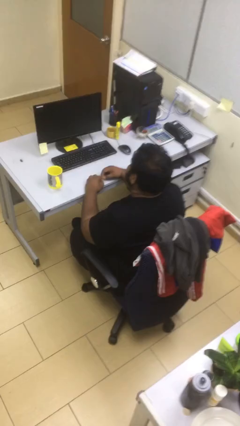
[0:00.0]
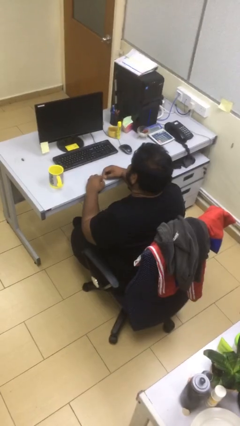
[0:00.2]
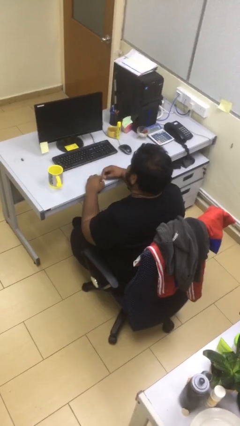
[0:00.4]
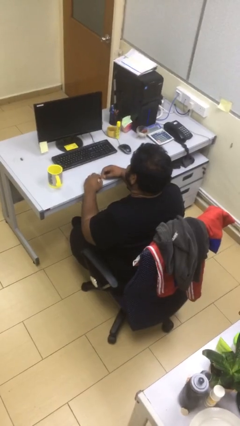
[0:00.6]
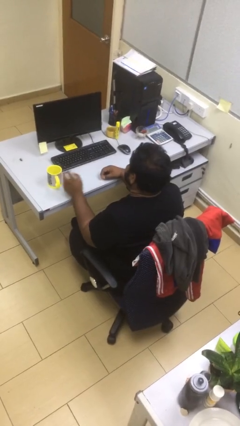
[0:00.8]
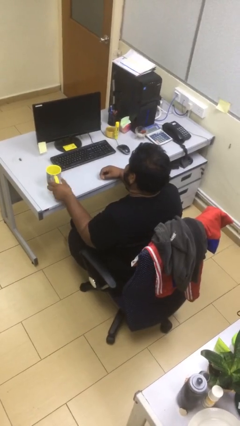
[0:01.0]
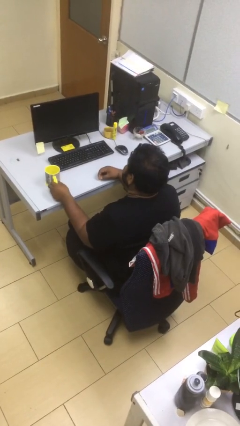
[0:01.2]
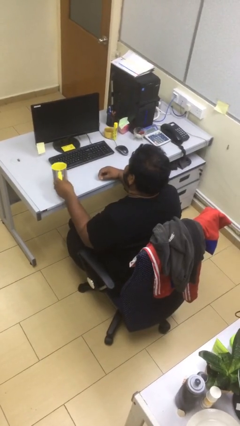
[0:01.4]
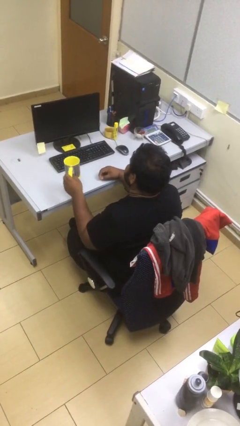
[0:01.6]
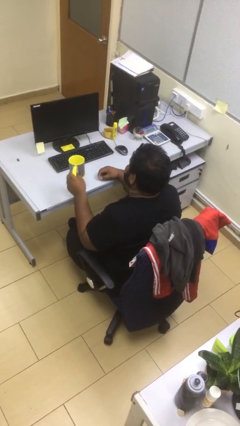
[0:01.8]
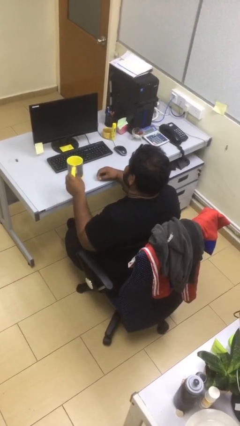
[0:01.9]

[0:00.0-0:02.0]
person picks up object from table

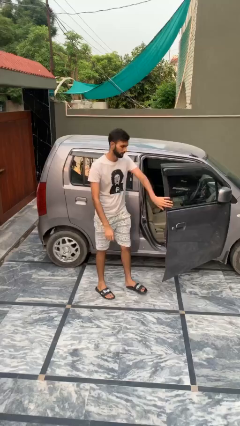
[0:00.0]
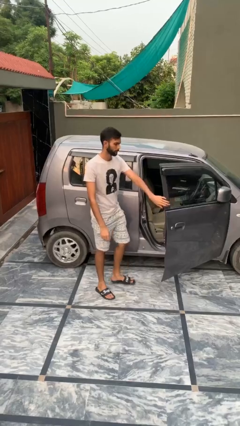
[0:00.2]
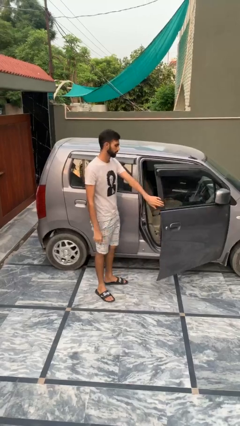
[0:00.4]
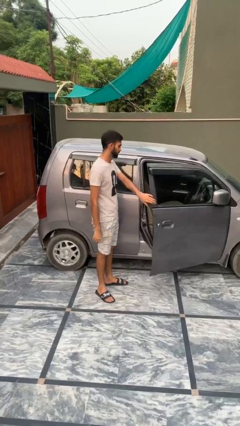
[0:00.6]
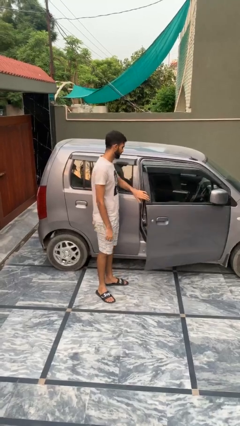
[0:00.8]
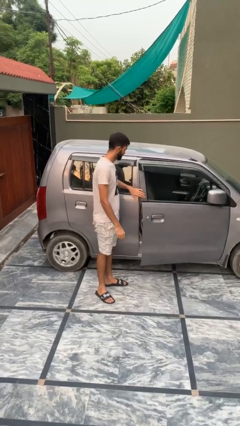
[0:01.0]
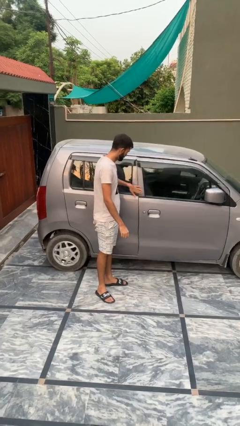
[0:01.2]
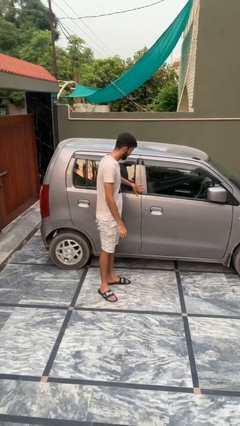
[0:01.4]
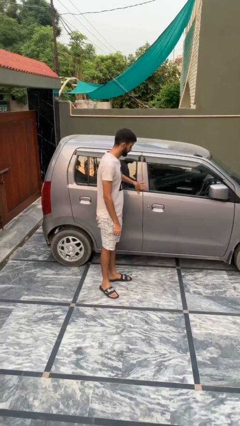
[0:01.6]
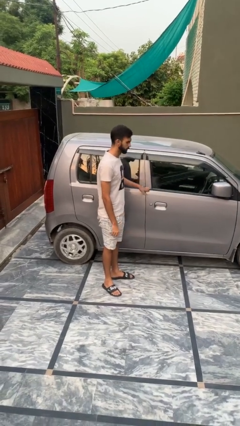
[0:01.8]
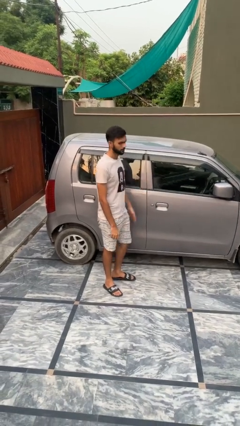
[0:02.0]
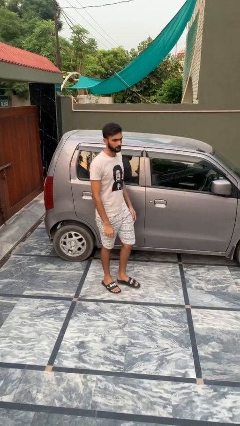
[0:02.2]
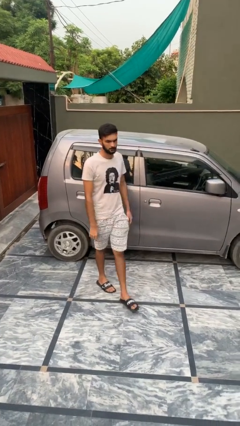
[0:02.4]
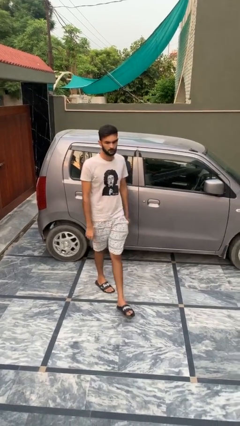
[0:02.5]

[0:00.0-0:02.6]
person closes car door

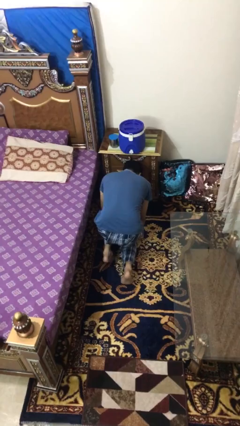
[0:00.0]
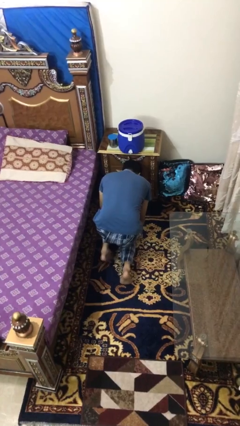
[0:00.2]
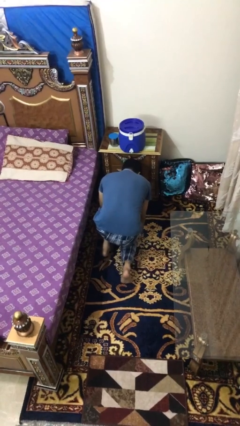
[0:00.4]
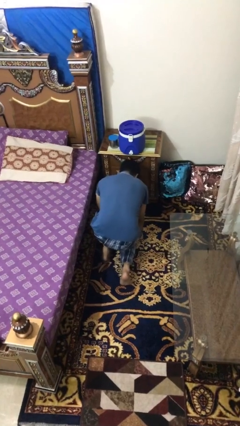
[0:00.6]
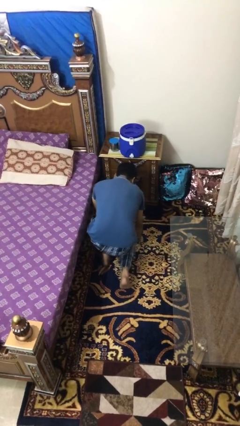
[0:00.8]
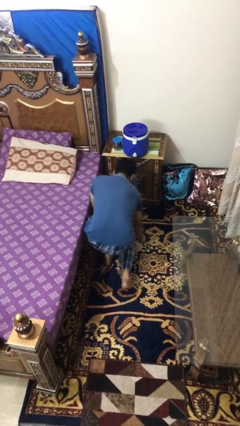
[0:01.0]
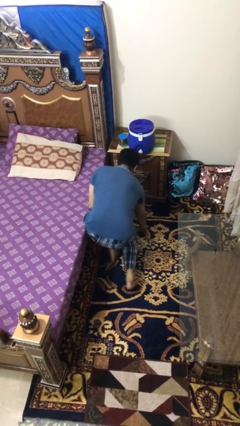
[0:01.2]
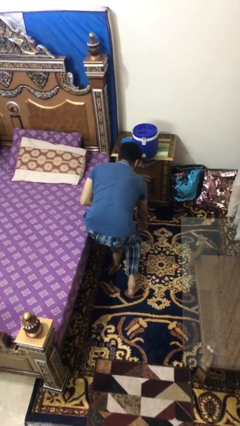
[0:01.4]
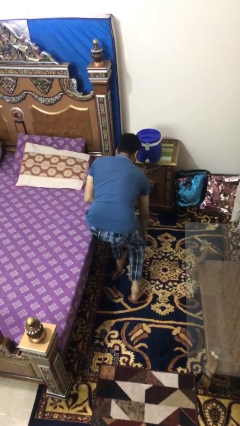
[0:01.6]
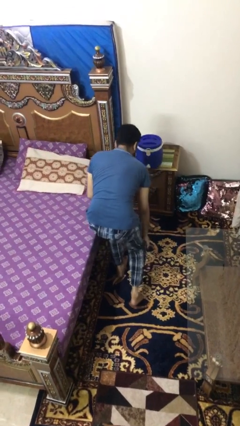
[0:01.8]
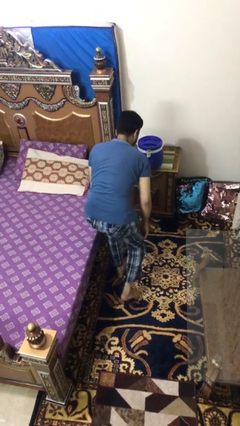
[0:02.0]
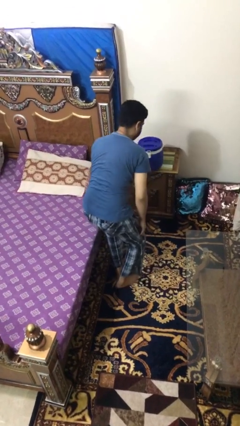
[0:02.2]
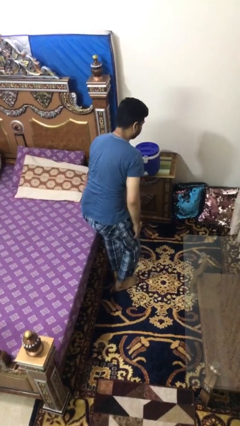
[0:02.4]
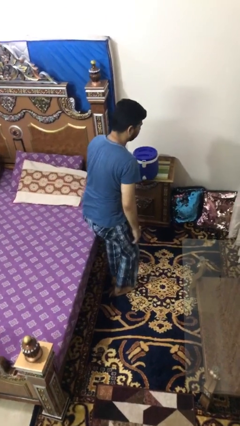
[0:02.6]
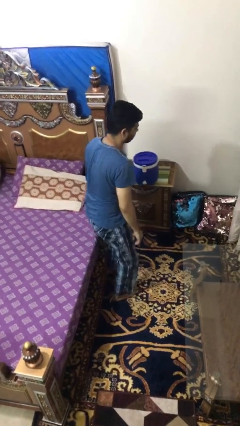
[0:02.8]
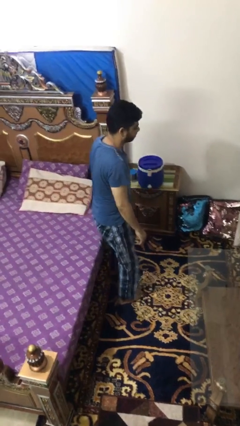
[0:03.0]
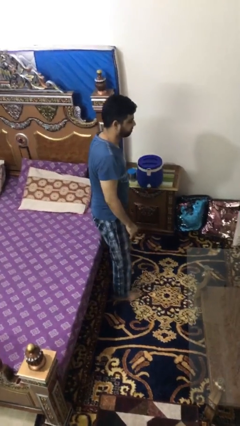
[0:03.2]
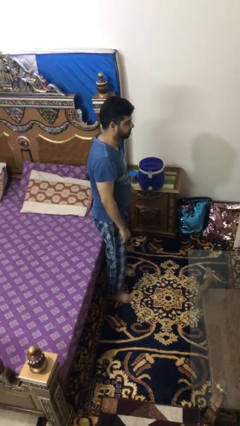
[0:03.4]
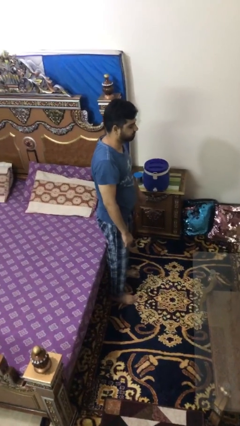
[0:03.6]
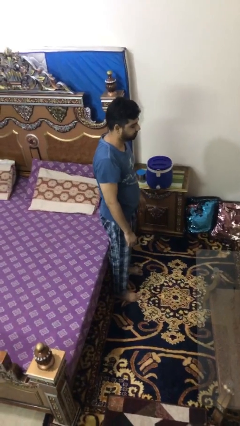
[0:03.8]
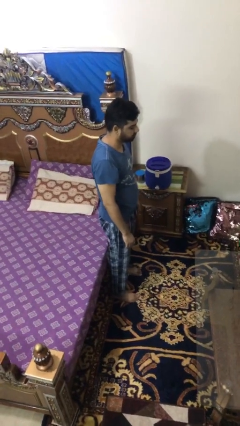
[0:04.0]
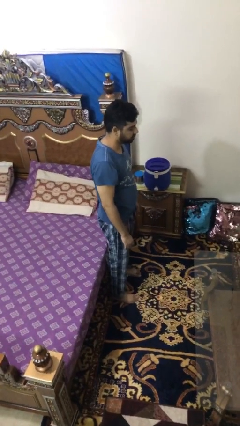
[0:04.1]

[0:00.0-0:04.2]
person stands up from floor

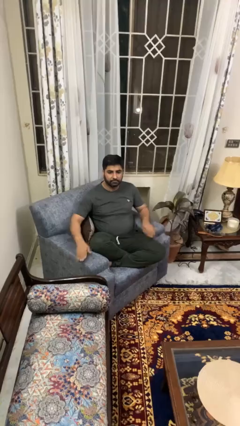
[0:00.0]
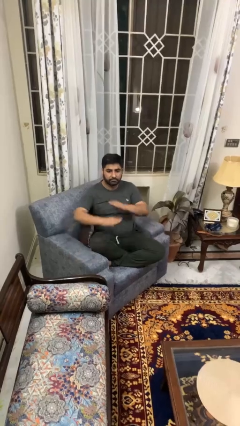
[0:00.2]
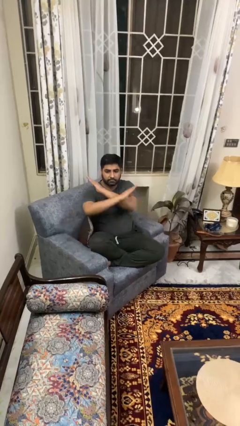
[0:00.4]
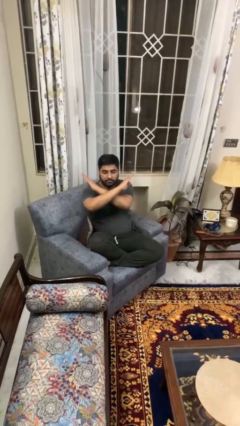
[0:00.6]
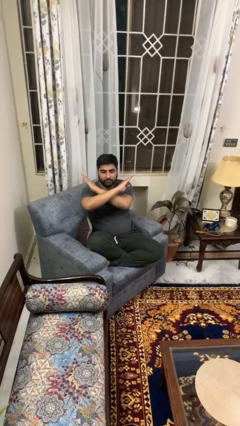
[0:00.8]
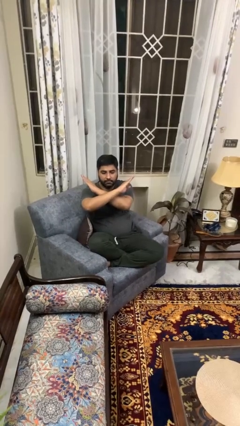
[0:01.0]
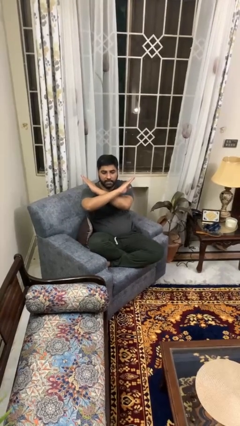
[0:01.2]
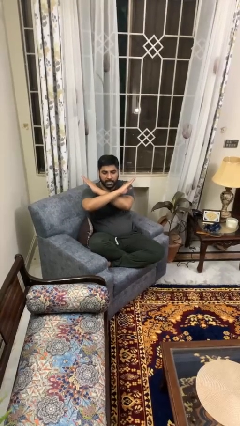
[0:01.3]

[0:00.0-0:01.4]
person gestures arms x

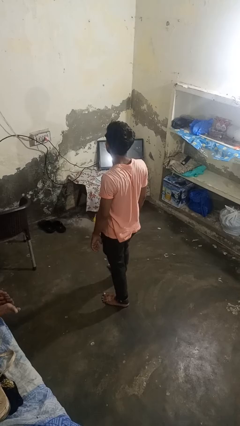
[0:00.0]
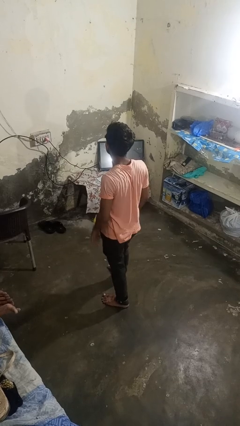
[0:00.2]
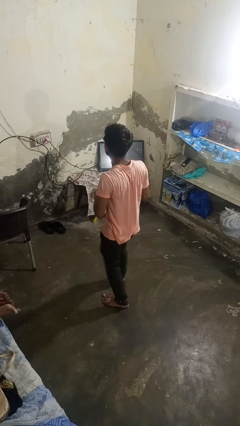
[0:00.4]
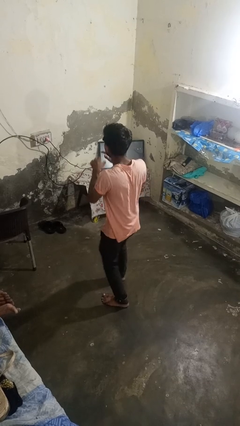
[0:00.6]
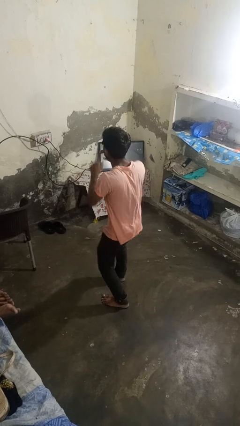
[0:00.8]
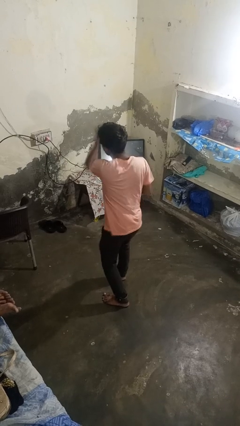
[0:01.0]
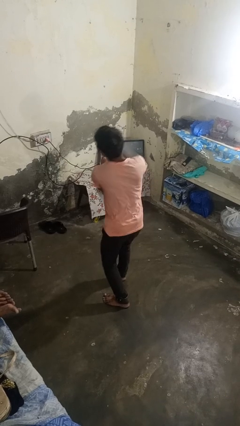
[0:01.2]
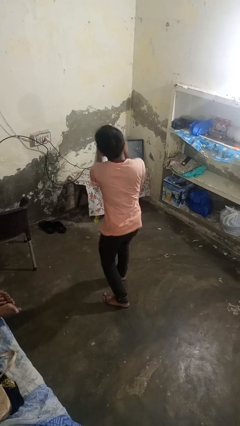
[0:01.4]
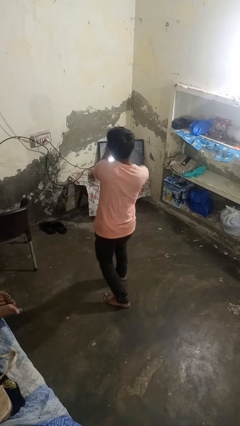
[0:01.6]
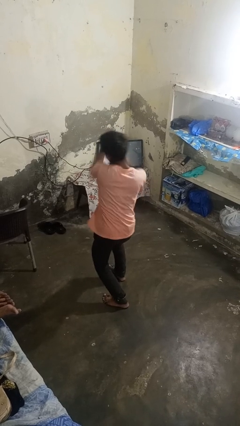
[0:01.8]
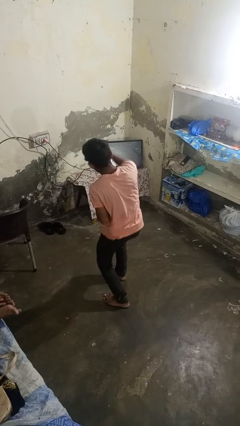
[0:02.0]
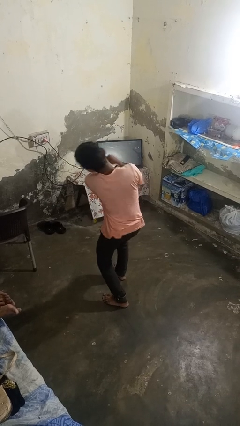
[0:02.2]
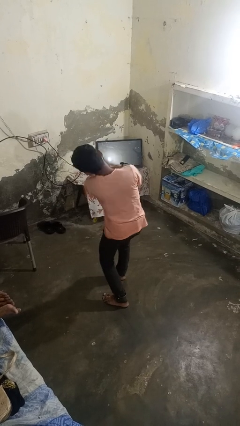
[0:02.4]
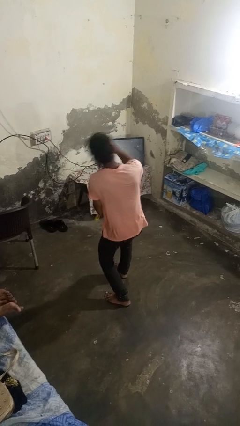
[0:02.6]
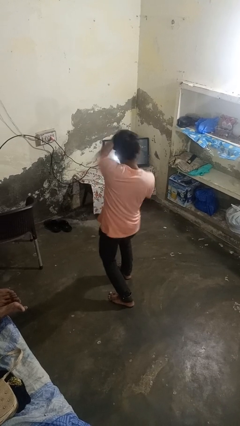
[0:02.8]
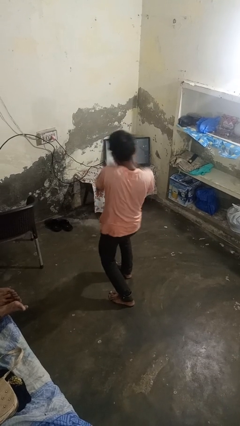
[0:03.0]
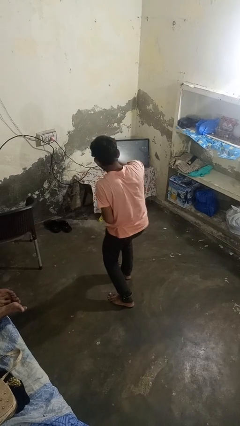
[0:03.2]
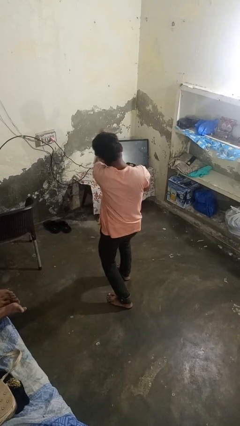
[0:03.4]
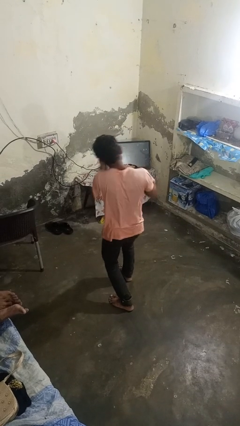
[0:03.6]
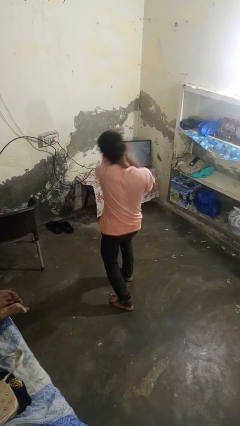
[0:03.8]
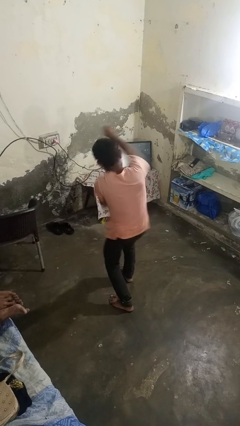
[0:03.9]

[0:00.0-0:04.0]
person punches

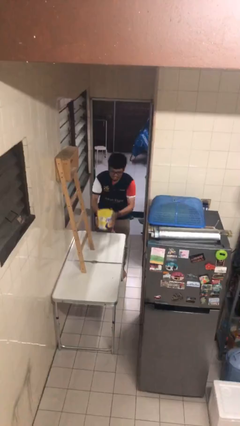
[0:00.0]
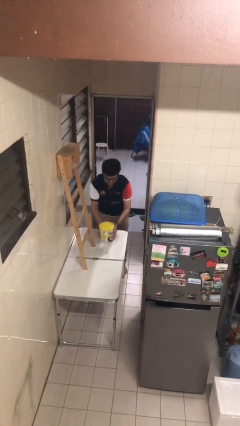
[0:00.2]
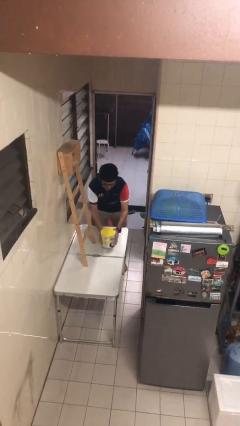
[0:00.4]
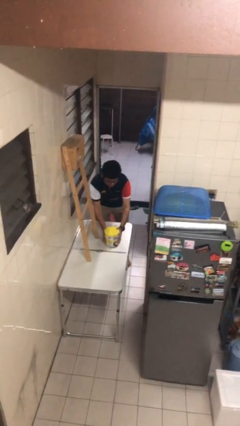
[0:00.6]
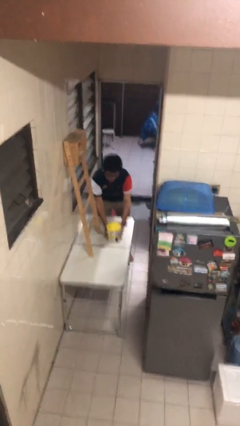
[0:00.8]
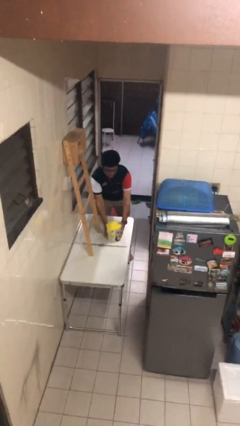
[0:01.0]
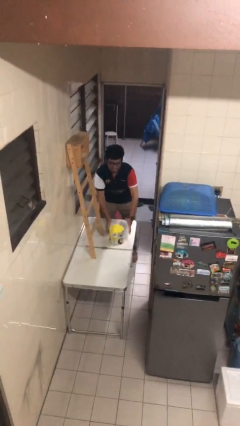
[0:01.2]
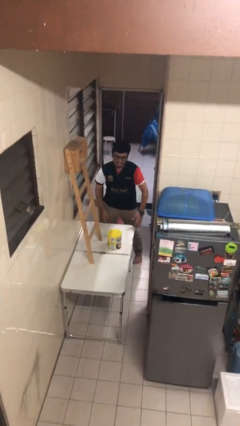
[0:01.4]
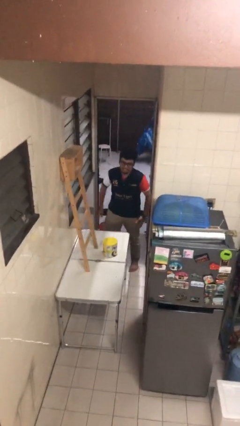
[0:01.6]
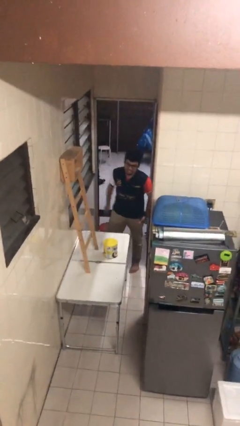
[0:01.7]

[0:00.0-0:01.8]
person puts down object on table

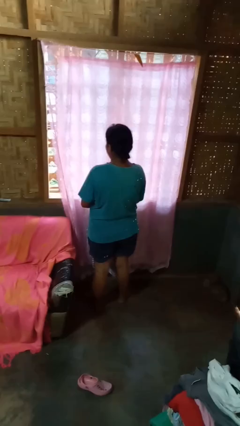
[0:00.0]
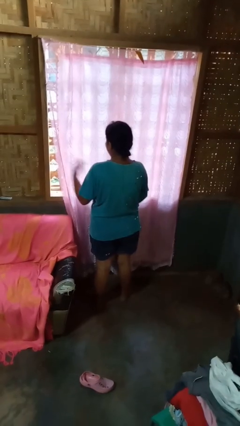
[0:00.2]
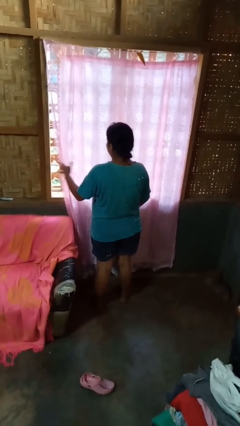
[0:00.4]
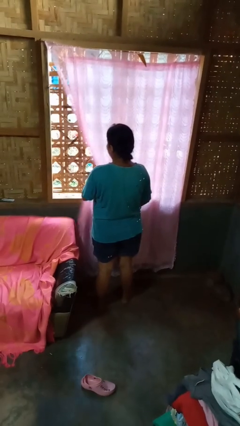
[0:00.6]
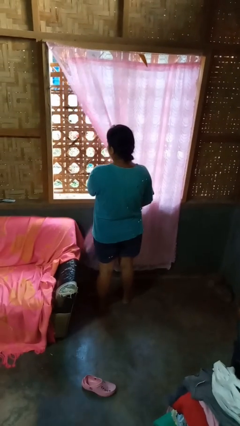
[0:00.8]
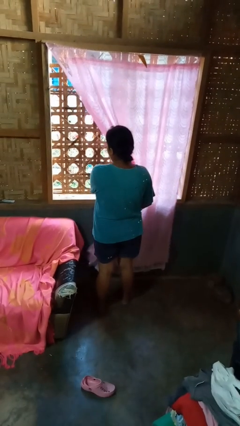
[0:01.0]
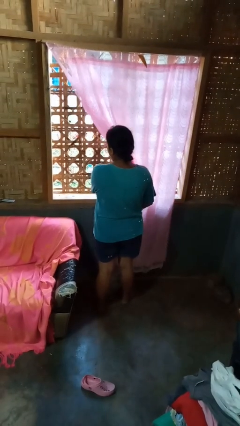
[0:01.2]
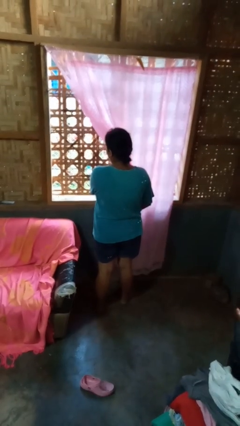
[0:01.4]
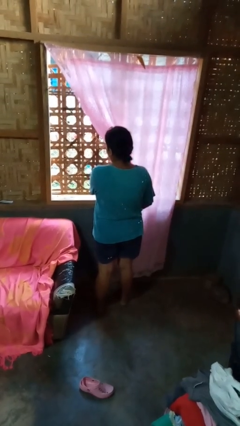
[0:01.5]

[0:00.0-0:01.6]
person opens curtains
